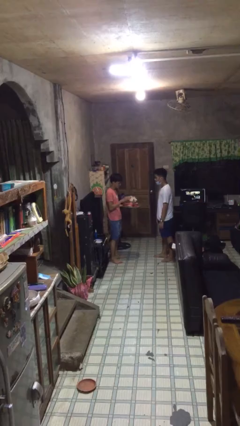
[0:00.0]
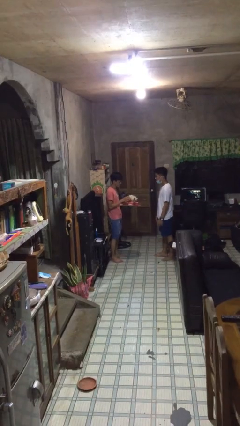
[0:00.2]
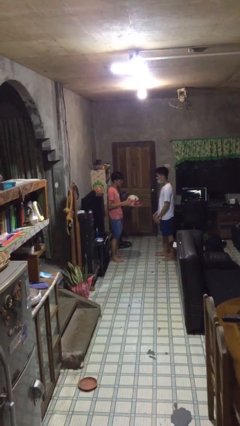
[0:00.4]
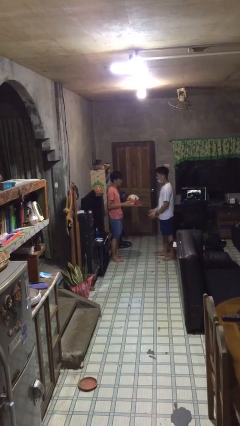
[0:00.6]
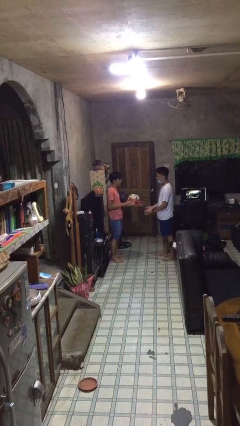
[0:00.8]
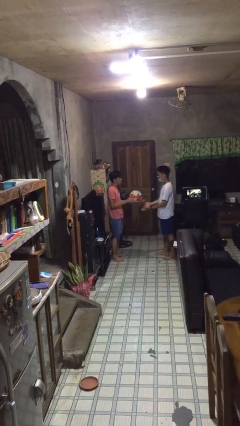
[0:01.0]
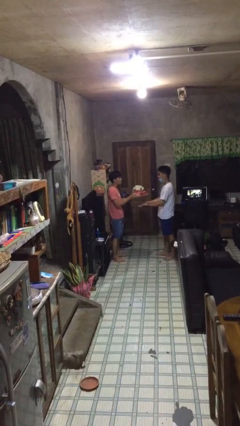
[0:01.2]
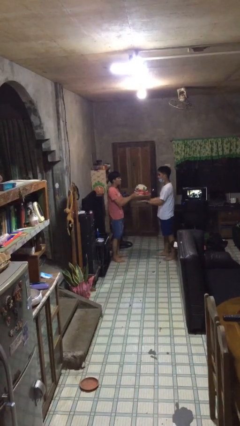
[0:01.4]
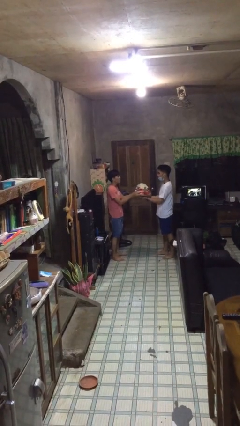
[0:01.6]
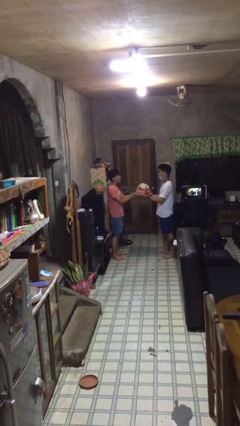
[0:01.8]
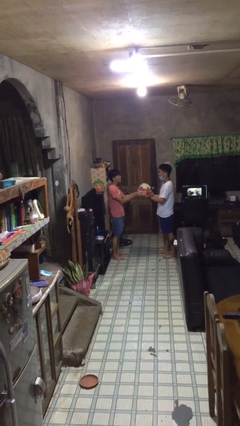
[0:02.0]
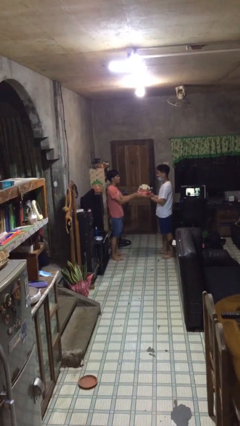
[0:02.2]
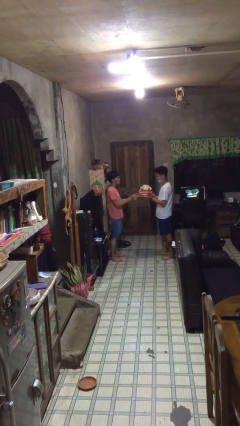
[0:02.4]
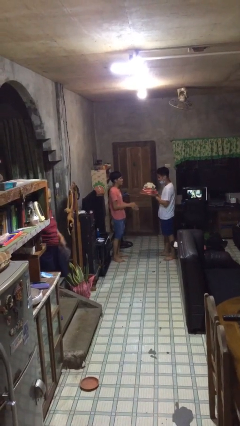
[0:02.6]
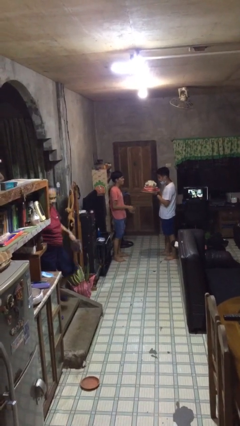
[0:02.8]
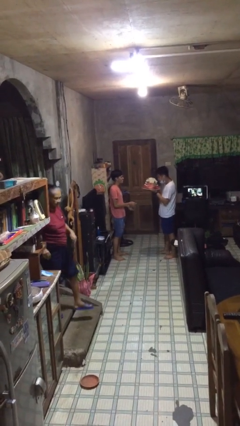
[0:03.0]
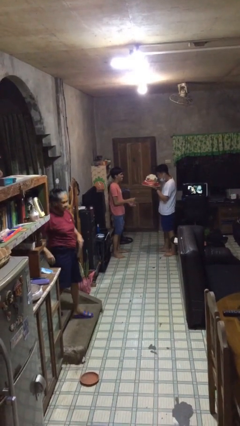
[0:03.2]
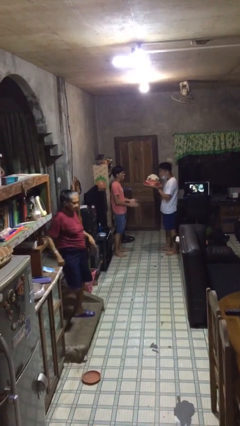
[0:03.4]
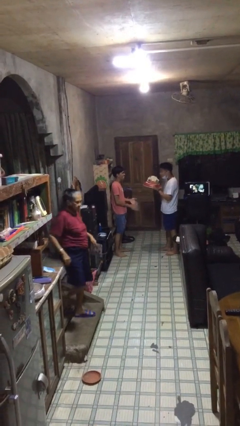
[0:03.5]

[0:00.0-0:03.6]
person transfers object to person

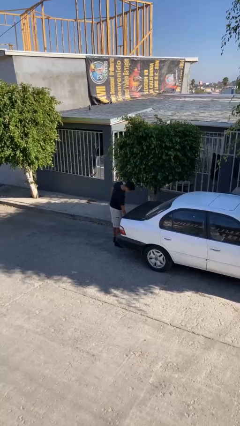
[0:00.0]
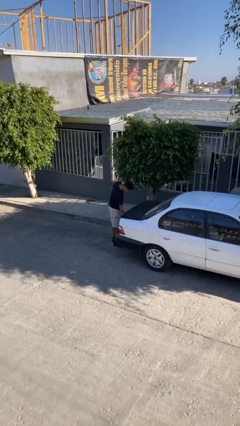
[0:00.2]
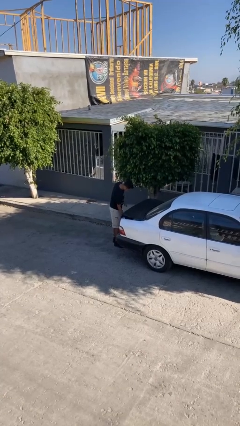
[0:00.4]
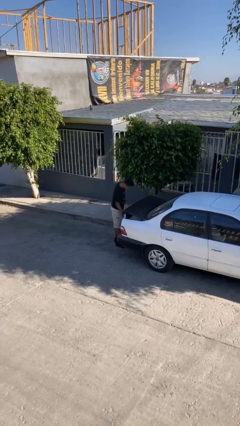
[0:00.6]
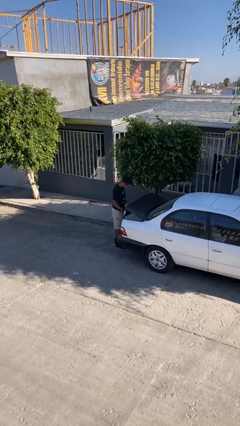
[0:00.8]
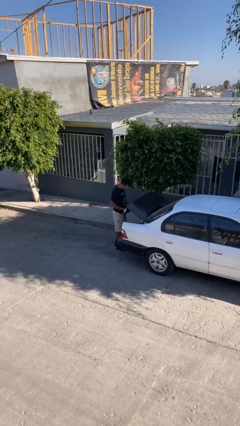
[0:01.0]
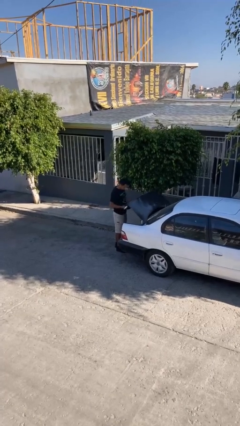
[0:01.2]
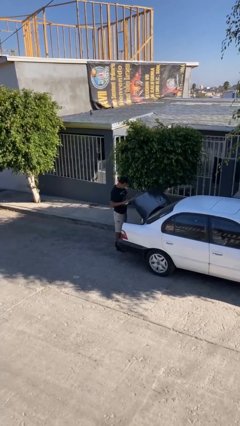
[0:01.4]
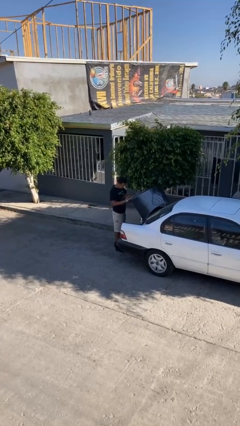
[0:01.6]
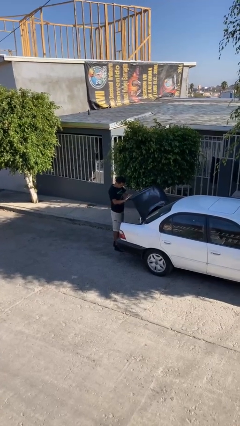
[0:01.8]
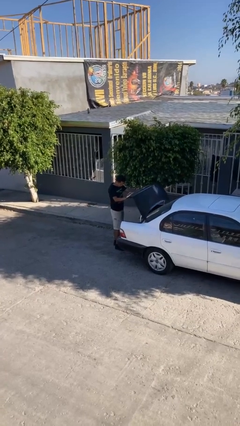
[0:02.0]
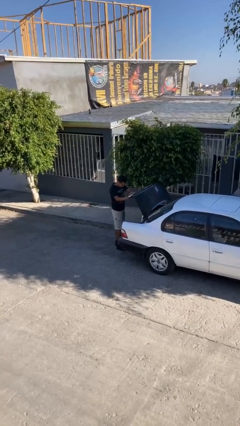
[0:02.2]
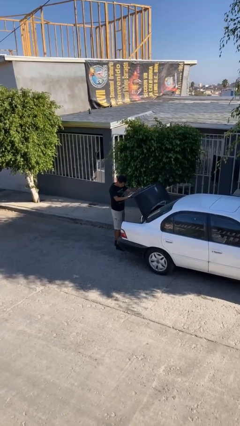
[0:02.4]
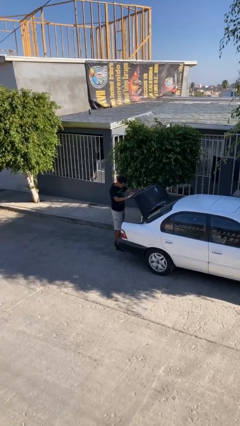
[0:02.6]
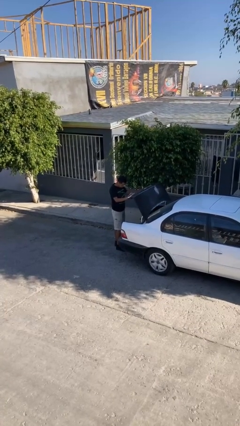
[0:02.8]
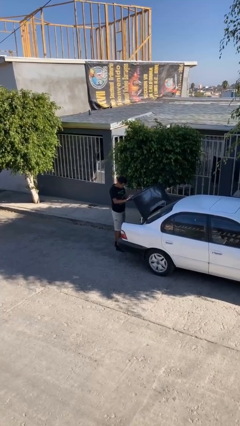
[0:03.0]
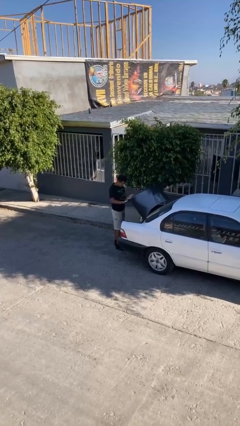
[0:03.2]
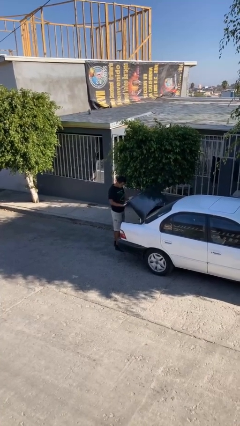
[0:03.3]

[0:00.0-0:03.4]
person opens car trunk

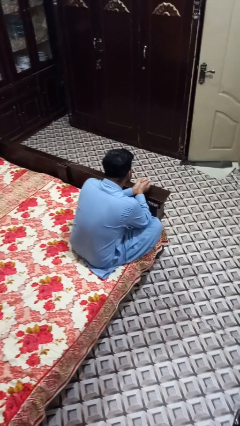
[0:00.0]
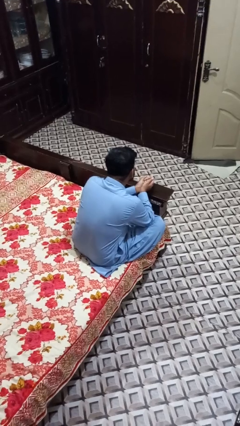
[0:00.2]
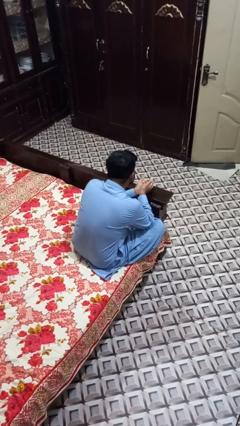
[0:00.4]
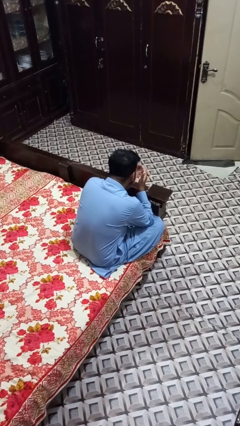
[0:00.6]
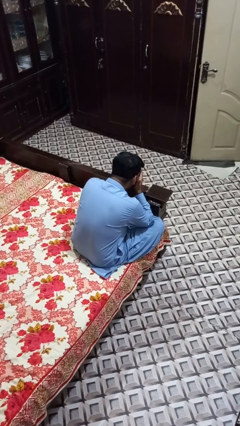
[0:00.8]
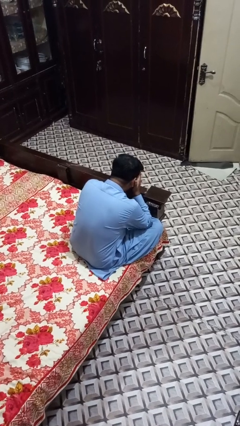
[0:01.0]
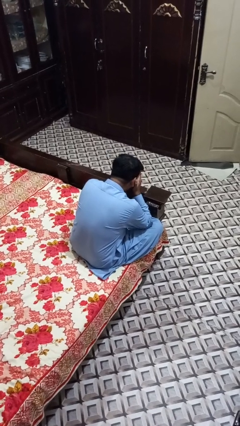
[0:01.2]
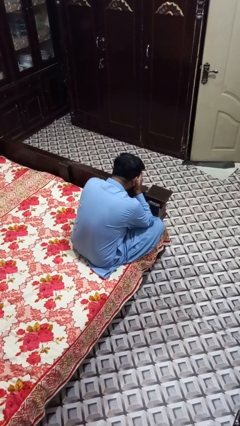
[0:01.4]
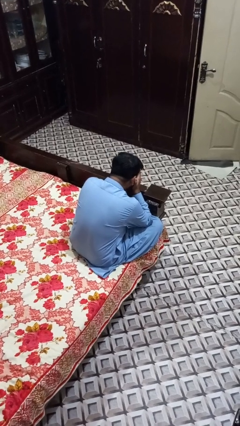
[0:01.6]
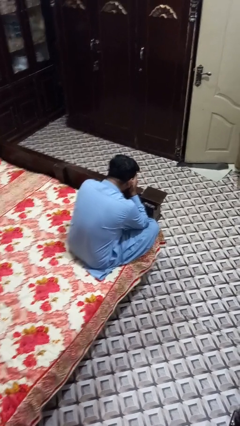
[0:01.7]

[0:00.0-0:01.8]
person covers face with hands

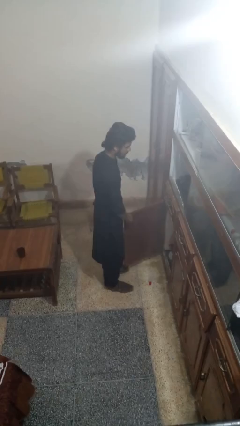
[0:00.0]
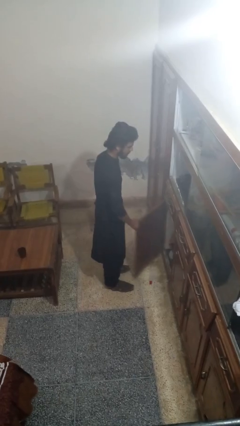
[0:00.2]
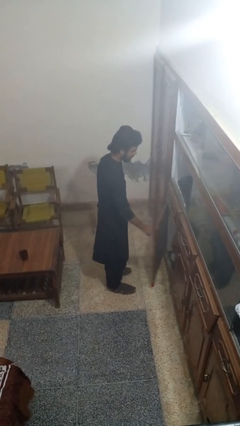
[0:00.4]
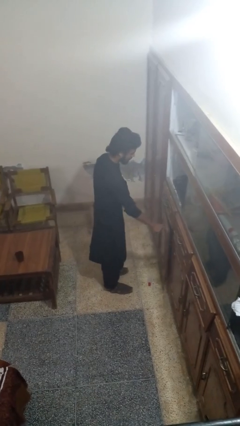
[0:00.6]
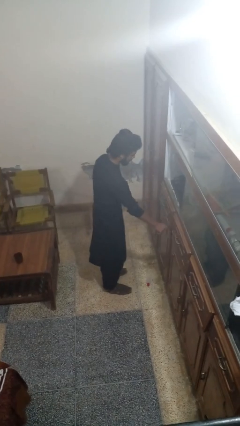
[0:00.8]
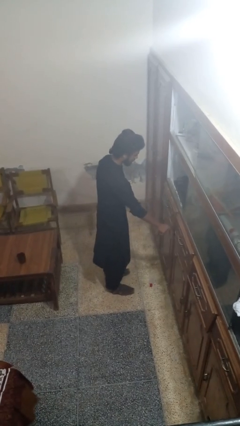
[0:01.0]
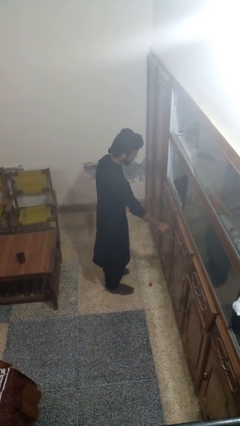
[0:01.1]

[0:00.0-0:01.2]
person closes cabinet

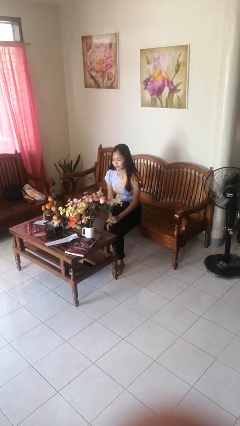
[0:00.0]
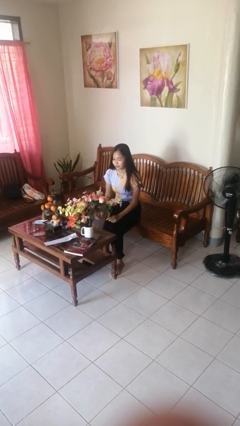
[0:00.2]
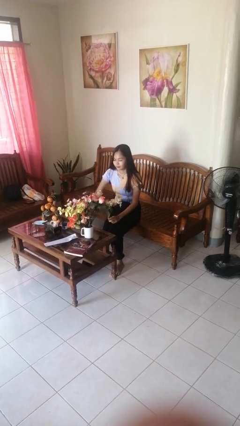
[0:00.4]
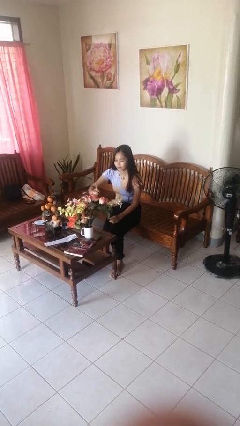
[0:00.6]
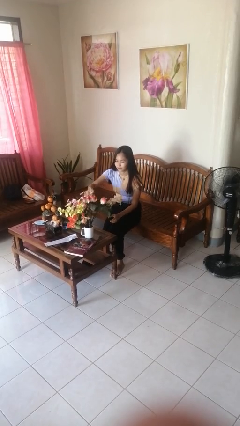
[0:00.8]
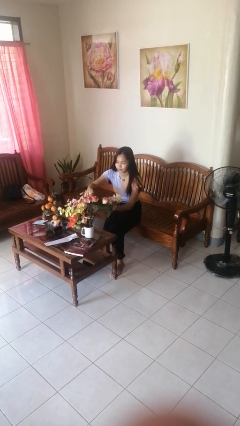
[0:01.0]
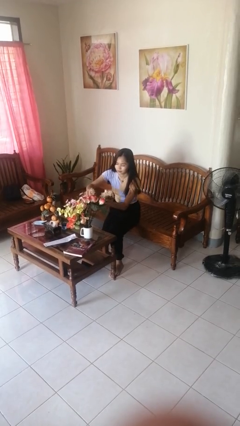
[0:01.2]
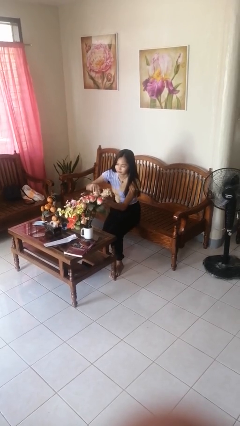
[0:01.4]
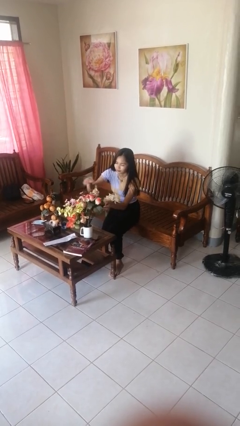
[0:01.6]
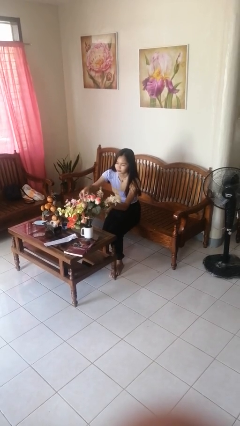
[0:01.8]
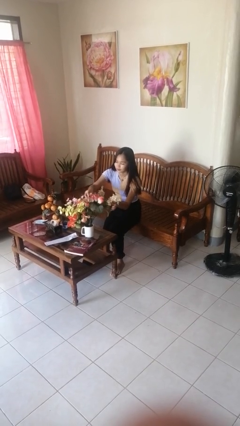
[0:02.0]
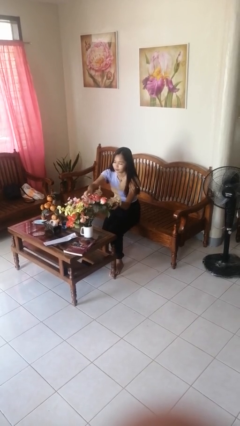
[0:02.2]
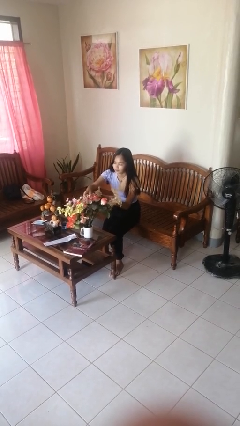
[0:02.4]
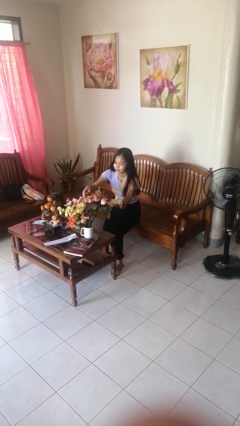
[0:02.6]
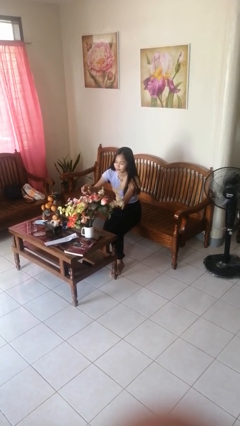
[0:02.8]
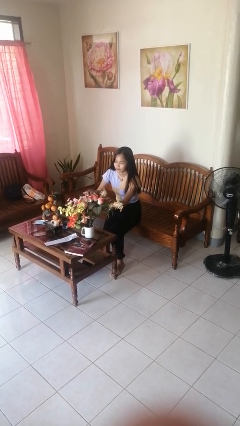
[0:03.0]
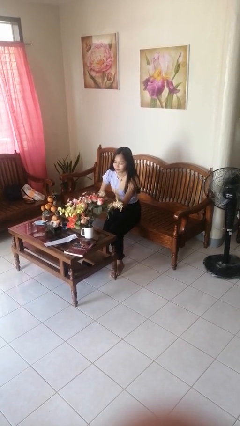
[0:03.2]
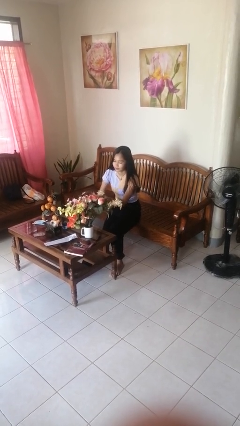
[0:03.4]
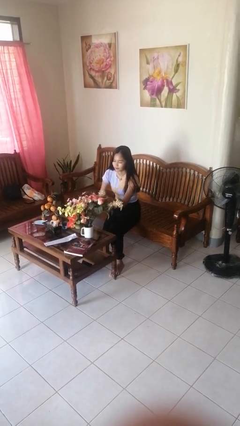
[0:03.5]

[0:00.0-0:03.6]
person arranges flowers in vase

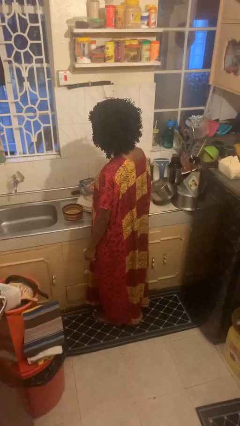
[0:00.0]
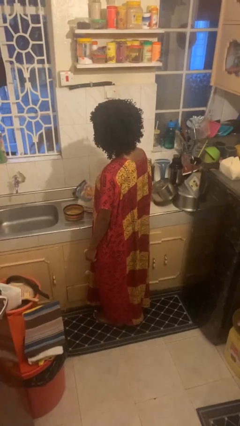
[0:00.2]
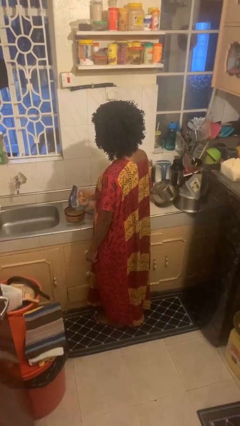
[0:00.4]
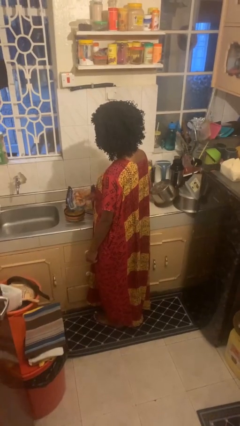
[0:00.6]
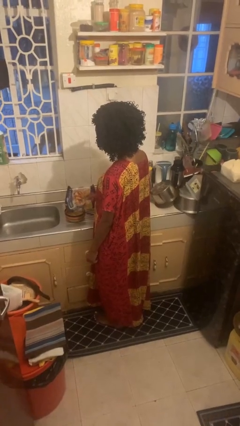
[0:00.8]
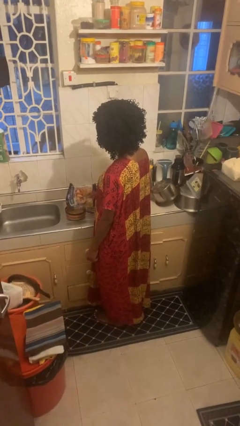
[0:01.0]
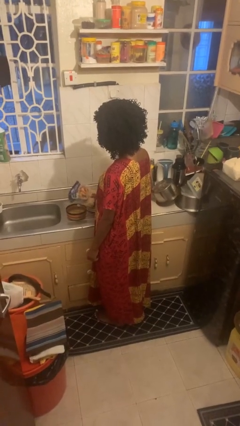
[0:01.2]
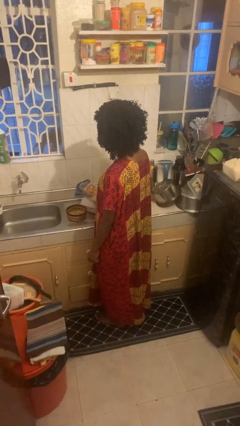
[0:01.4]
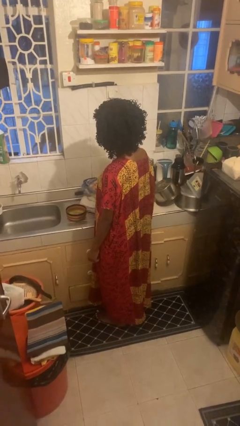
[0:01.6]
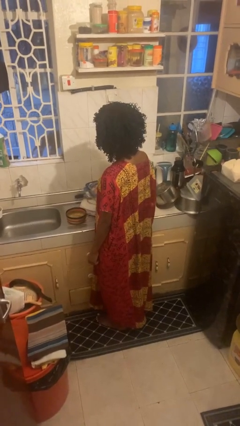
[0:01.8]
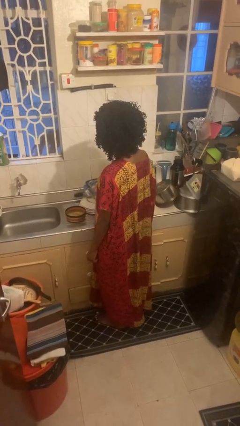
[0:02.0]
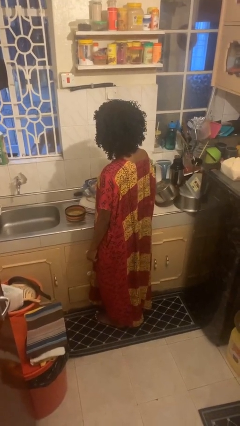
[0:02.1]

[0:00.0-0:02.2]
person pours into bowl

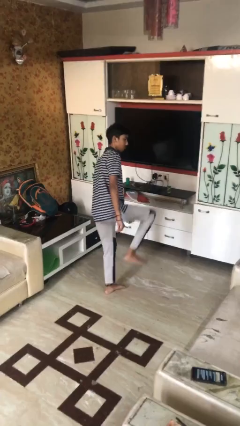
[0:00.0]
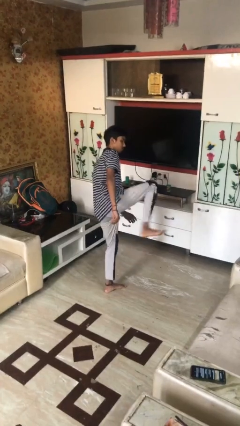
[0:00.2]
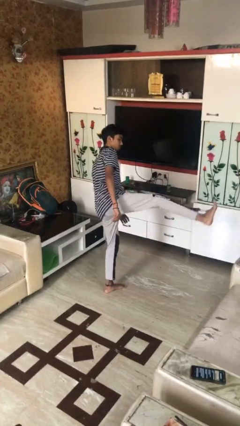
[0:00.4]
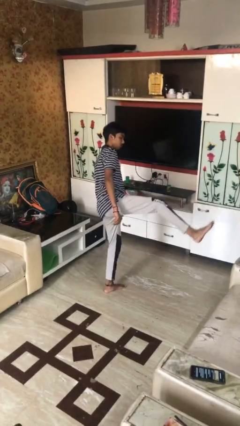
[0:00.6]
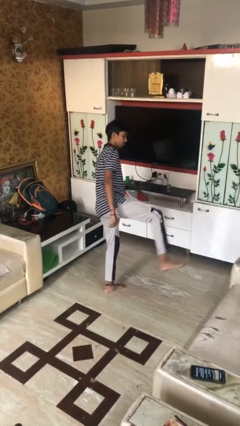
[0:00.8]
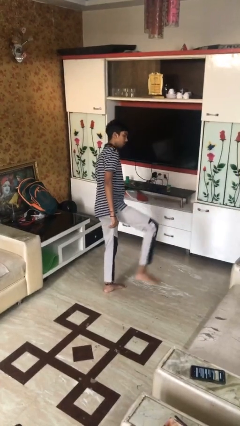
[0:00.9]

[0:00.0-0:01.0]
person karate kicks

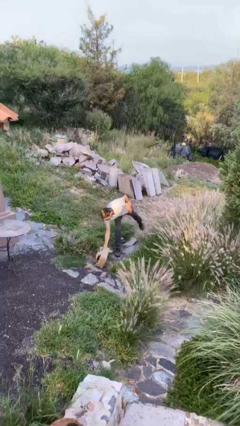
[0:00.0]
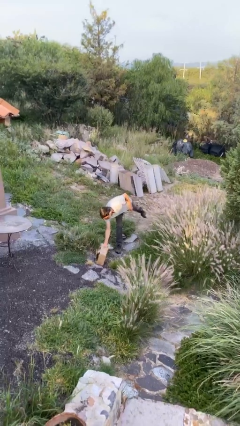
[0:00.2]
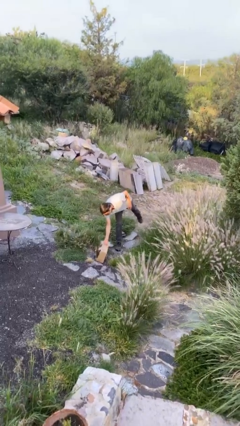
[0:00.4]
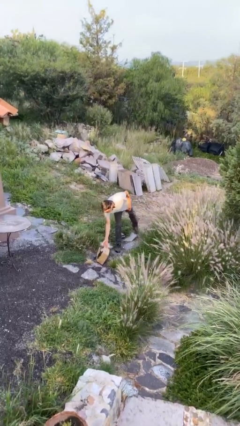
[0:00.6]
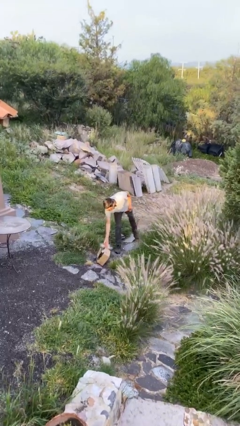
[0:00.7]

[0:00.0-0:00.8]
person puts down object on floor
